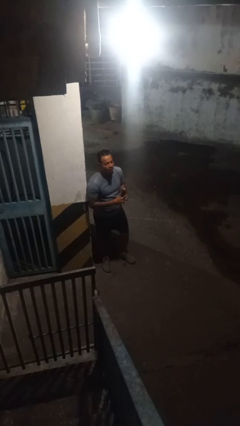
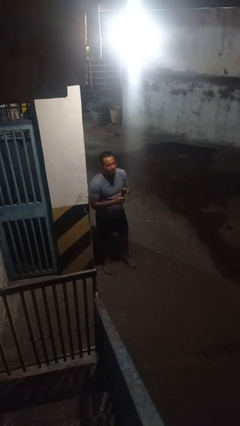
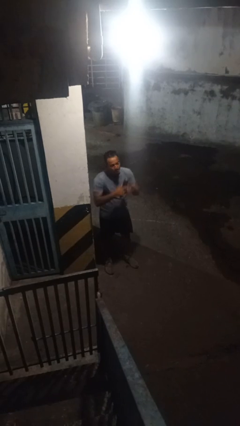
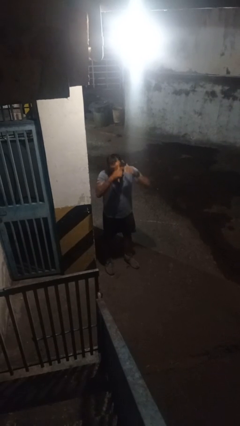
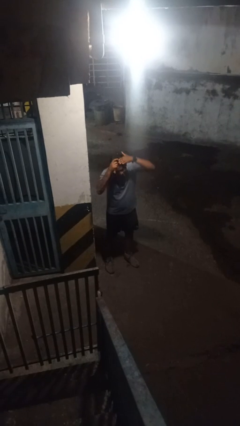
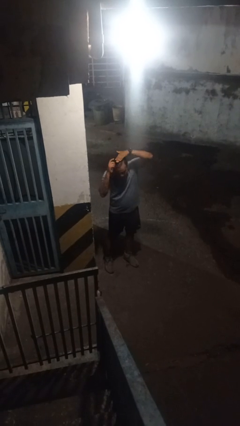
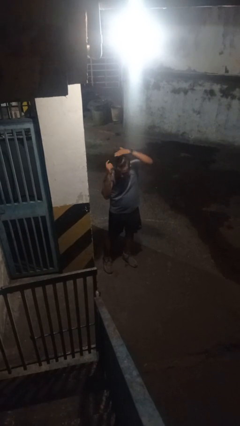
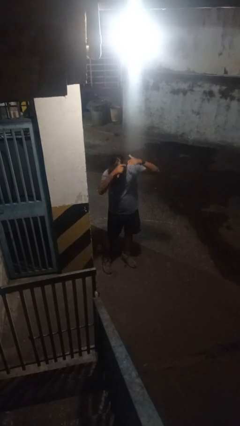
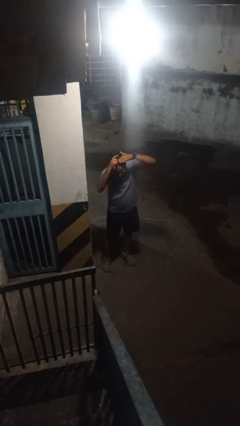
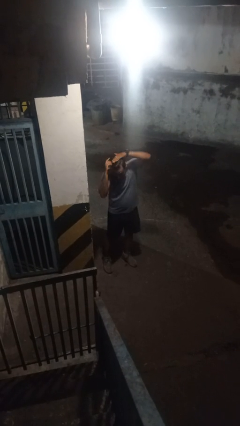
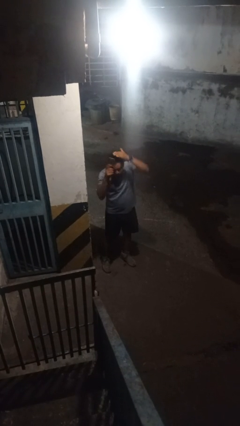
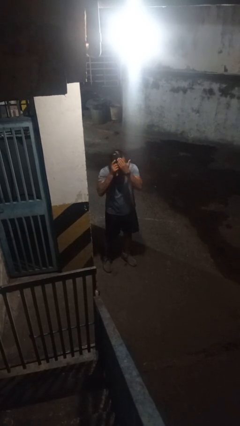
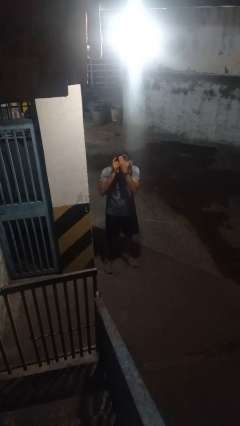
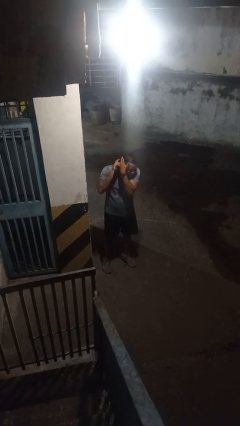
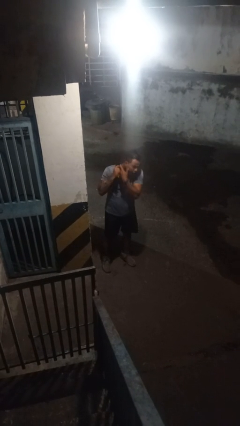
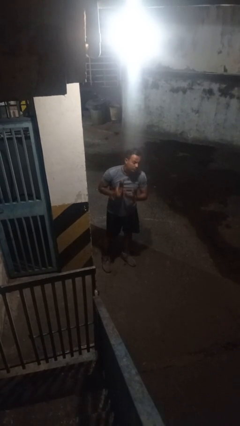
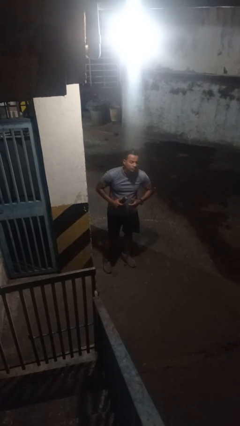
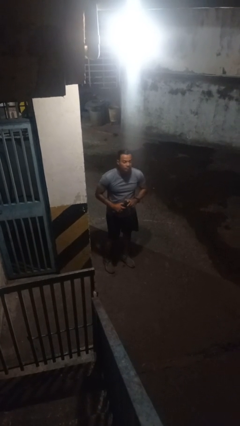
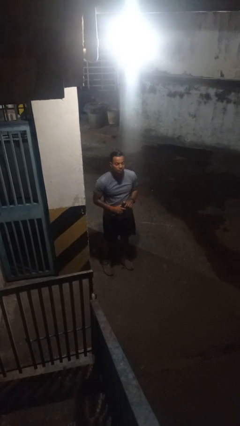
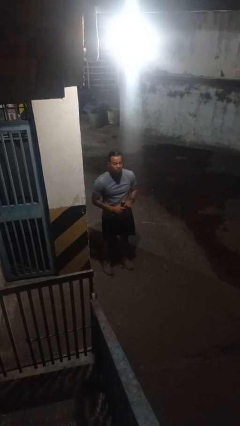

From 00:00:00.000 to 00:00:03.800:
person brushes hair

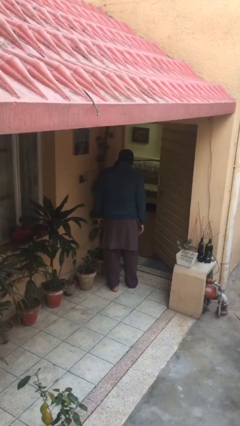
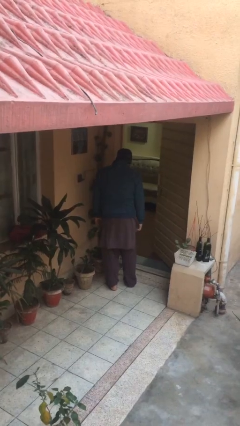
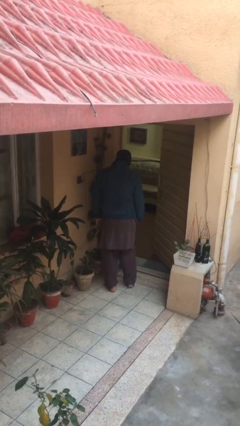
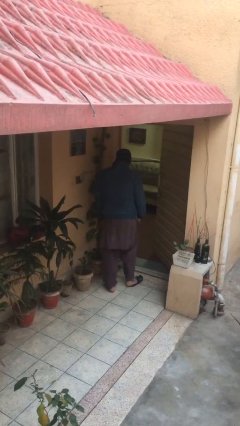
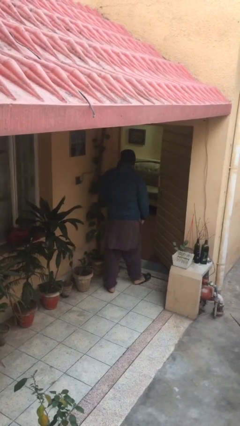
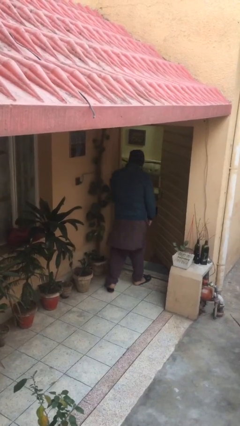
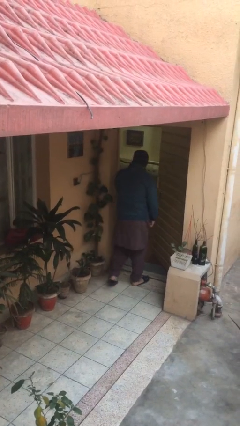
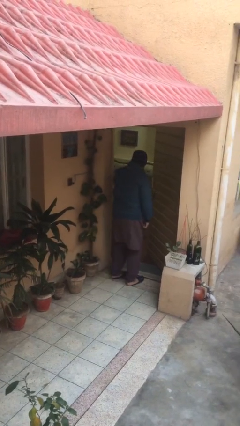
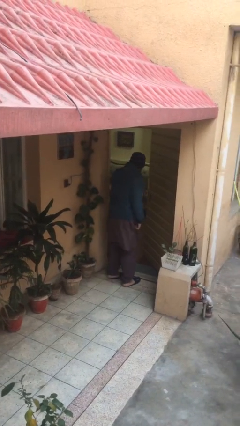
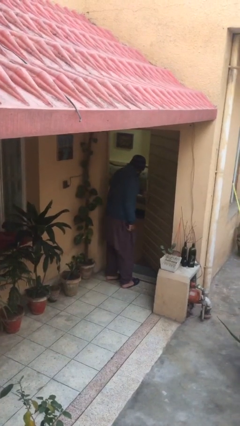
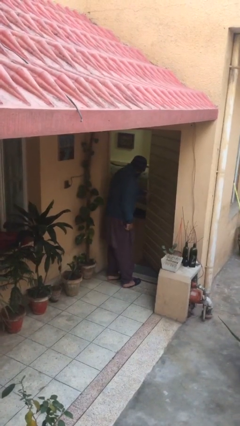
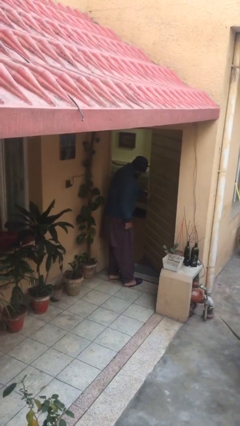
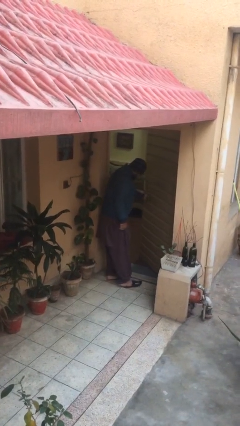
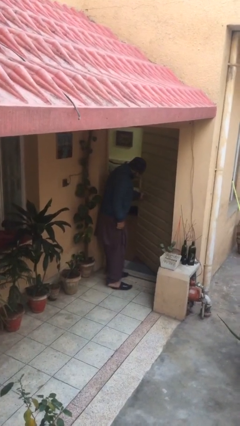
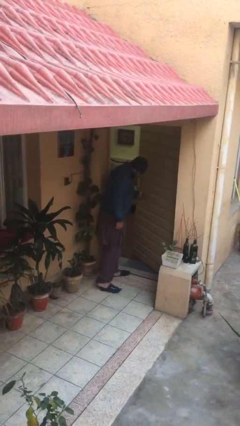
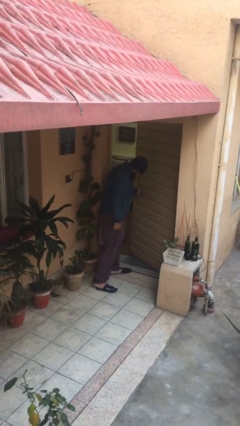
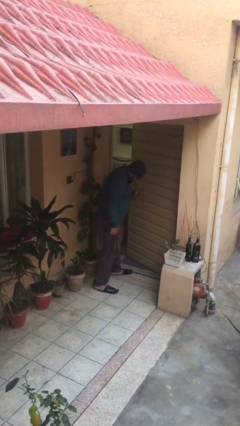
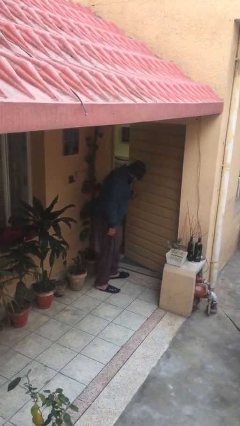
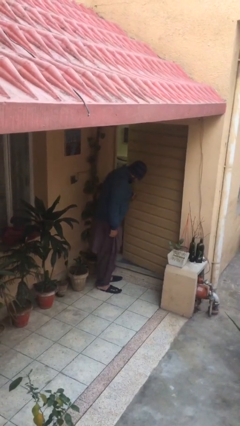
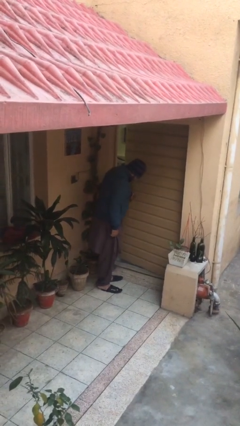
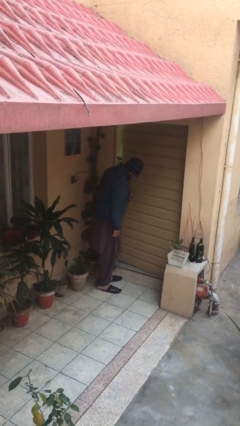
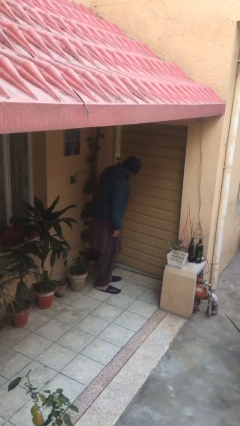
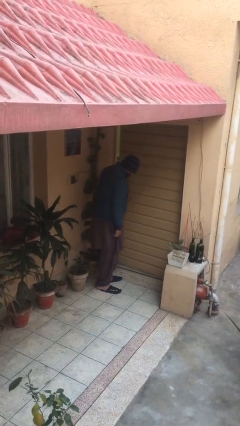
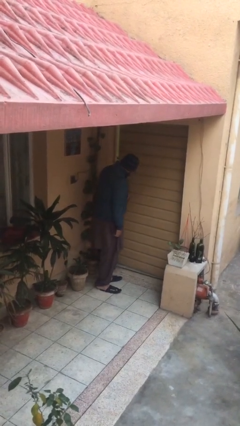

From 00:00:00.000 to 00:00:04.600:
person closes facility door

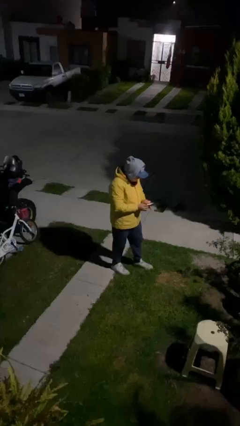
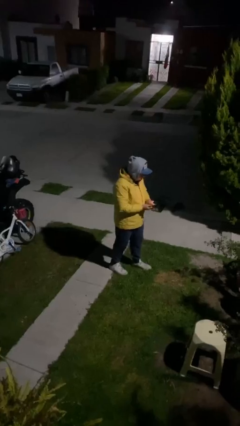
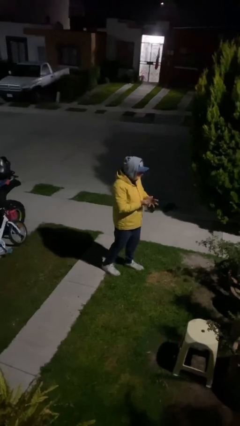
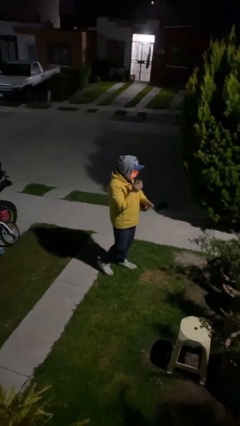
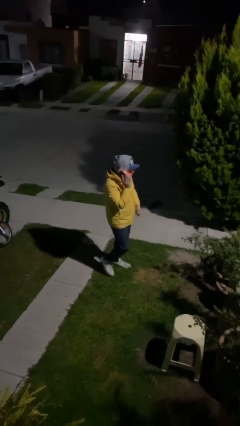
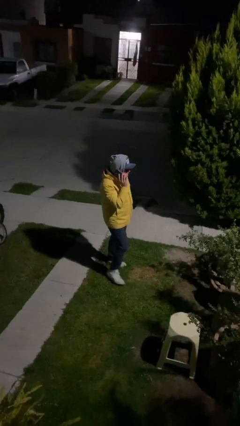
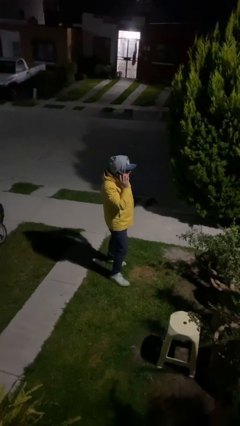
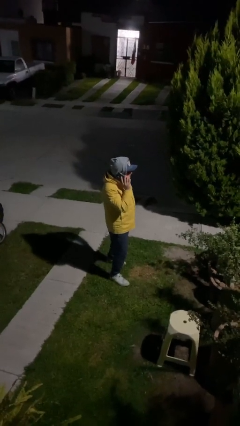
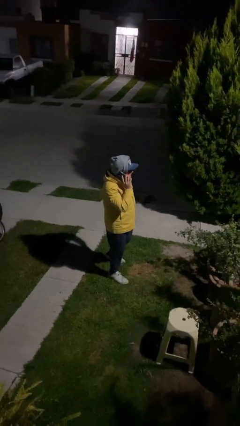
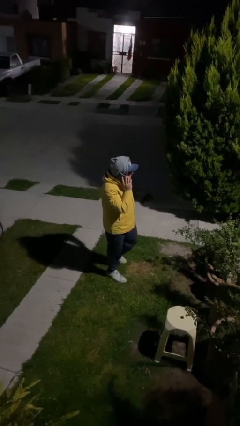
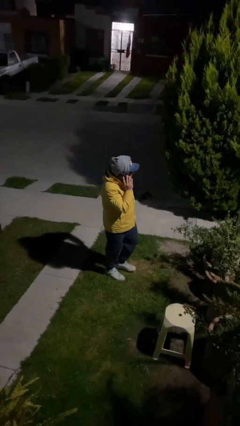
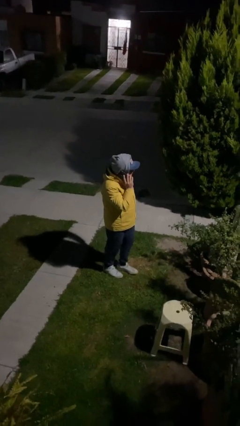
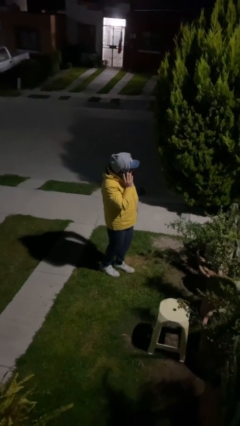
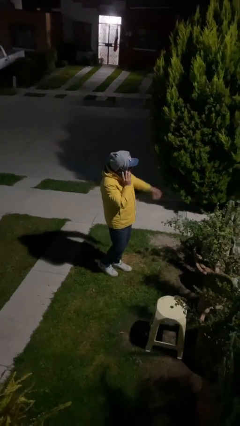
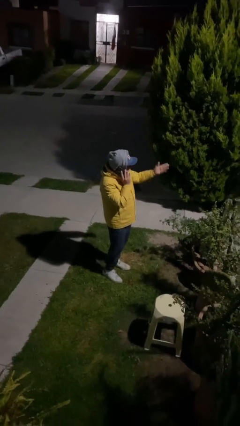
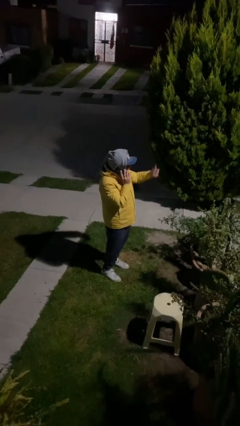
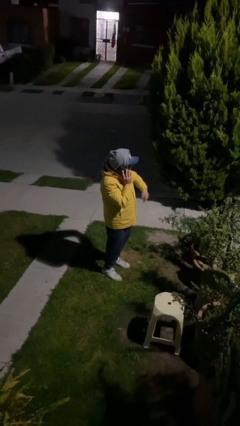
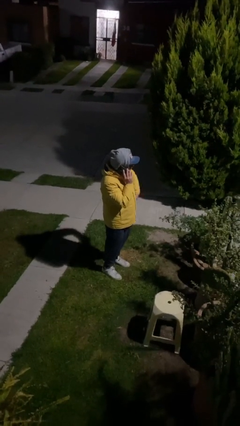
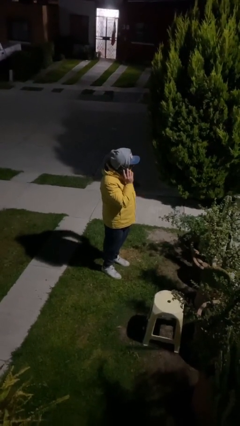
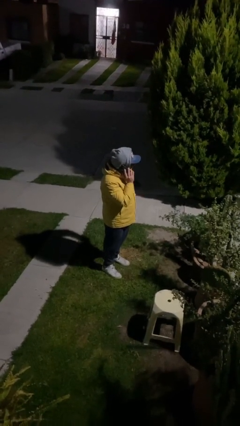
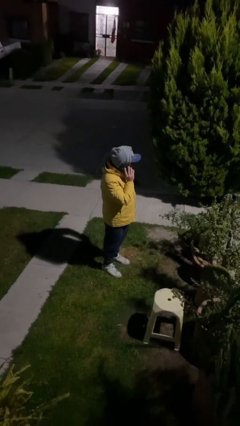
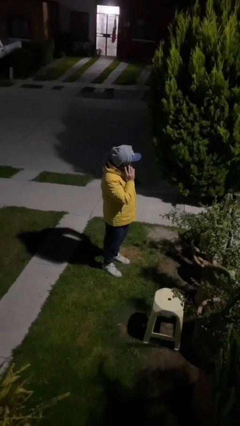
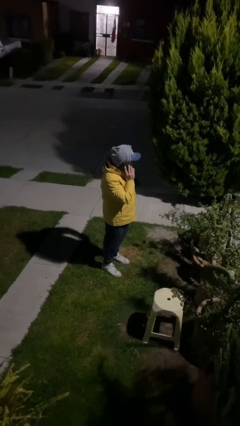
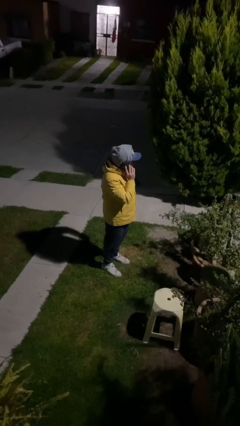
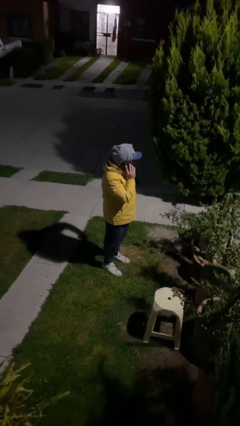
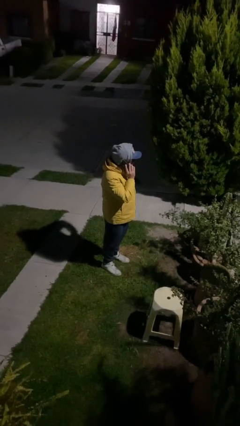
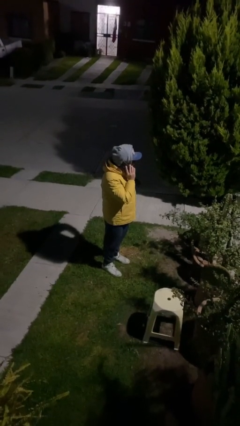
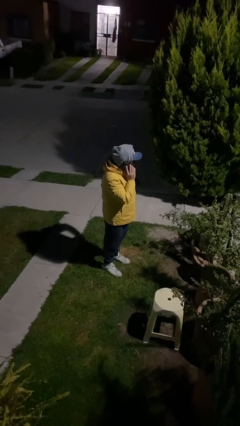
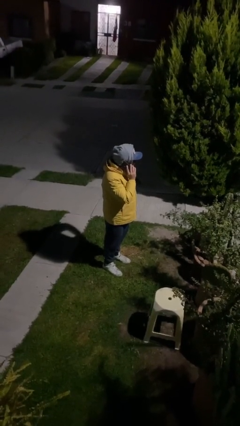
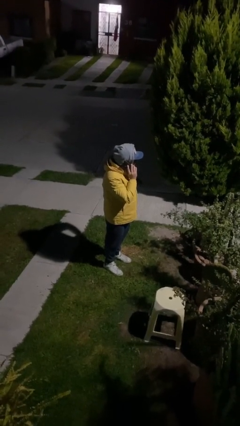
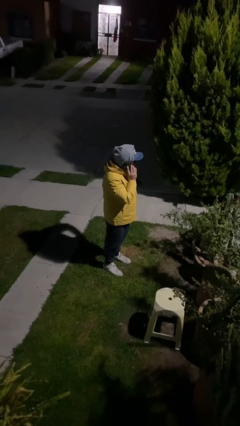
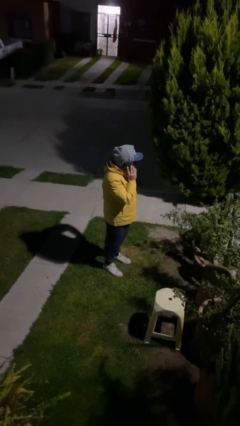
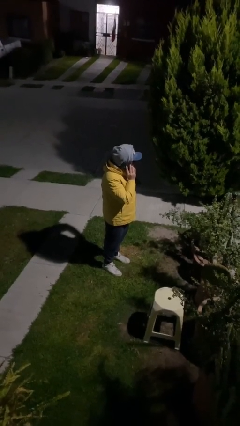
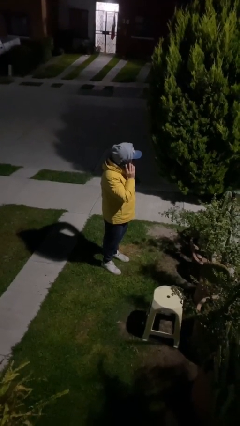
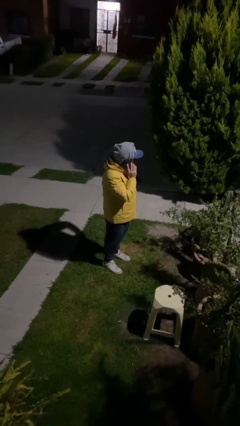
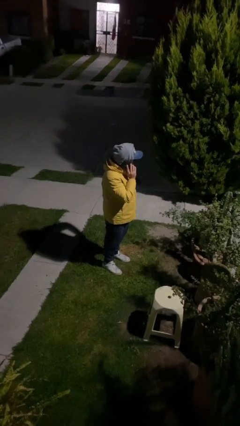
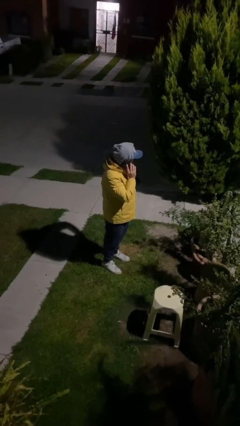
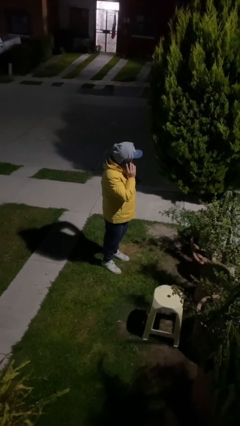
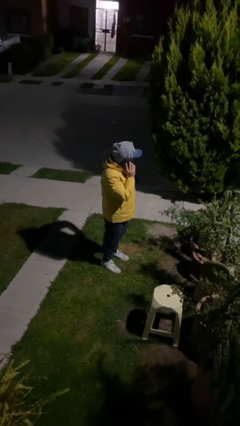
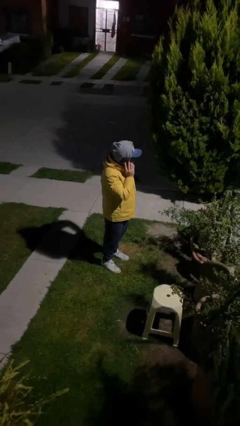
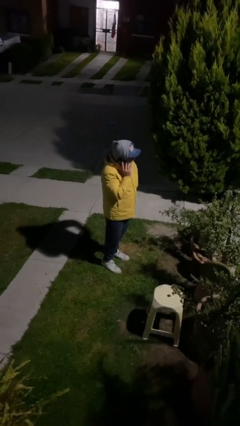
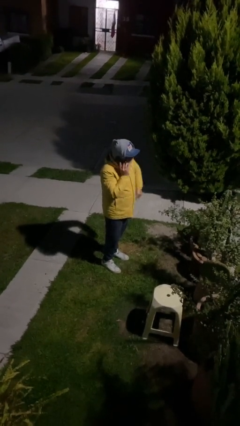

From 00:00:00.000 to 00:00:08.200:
person talks on phone

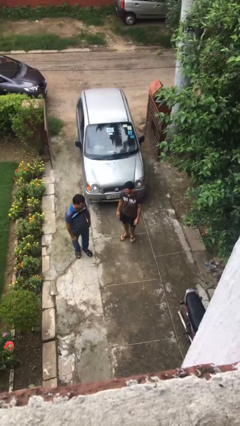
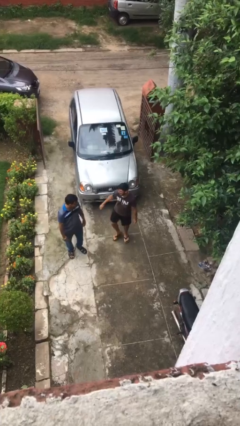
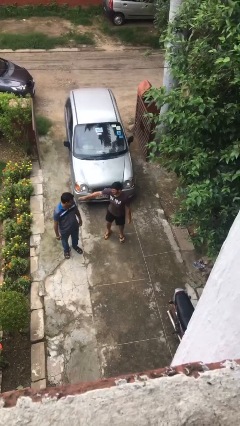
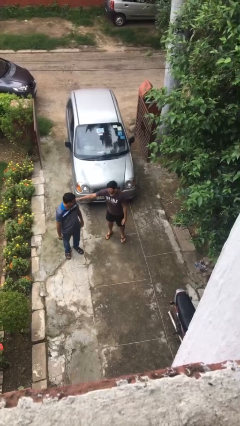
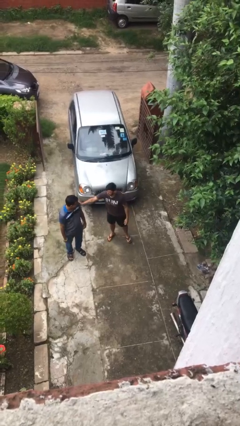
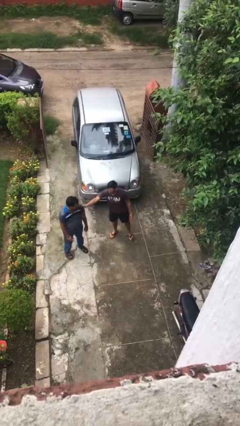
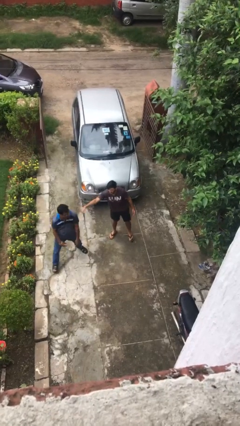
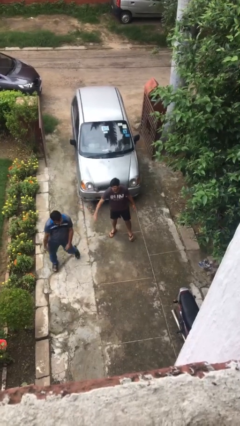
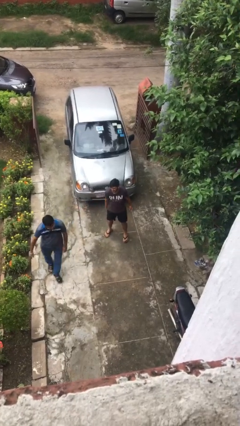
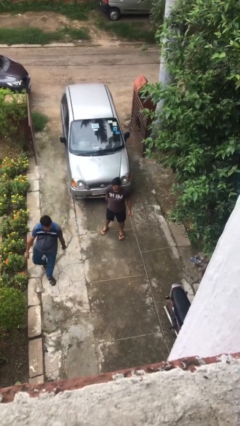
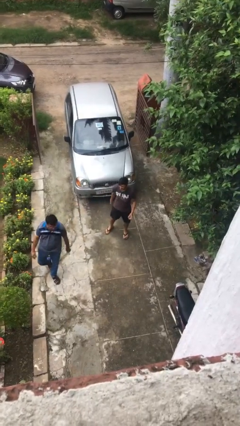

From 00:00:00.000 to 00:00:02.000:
person shoves person
